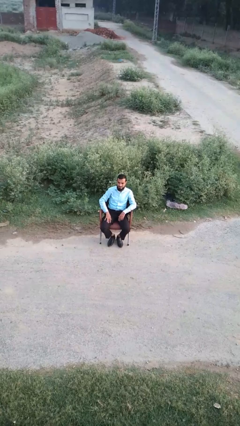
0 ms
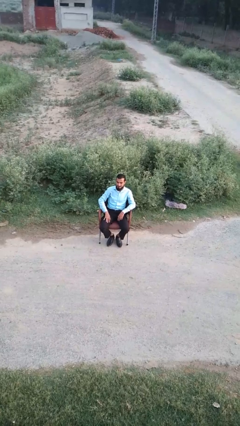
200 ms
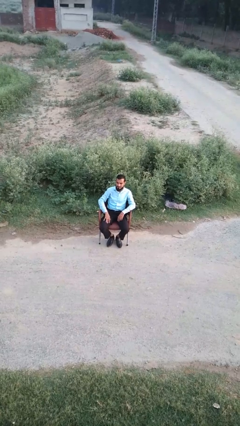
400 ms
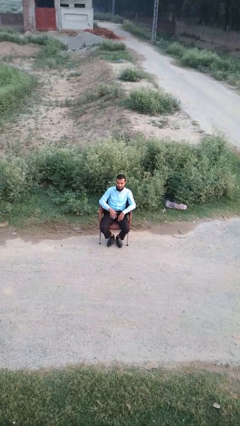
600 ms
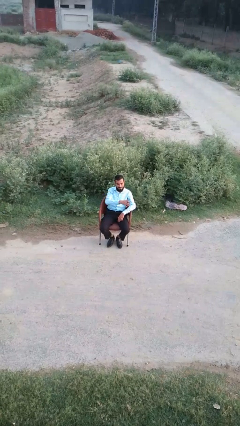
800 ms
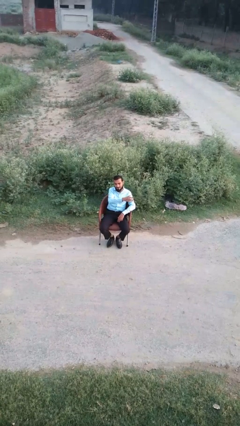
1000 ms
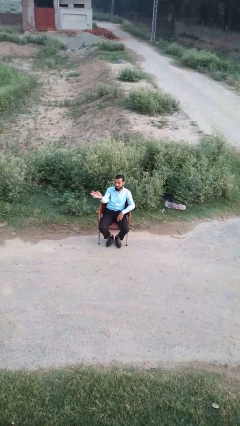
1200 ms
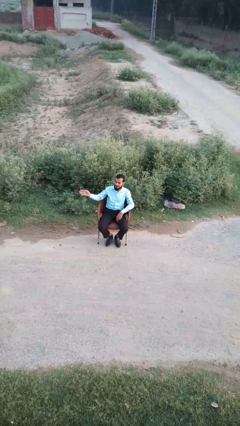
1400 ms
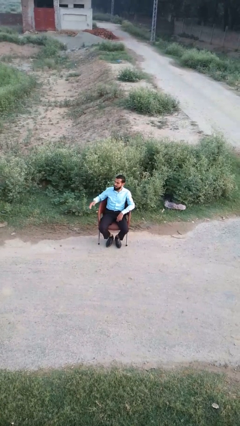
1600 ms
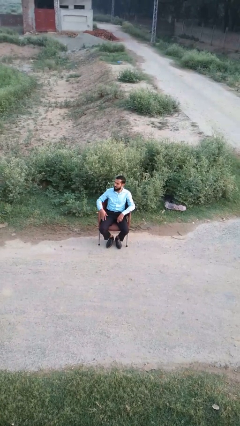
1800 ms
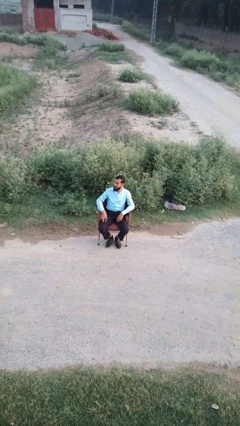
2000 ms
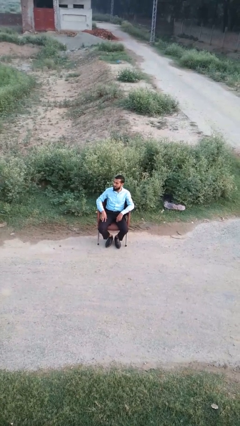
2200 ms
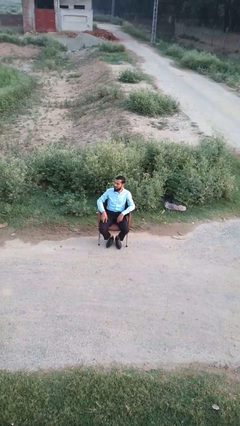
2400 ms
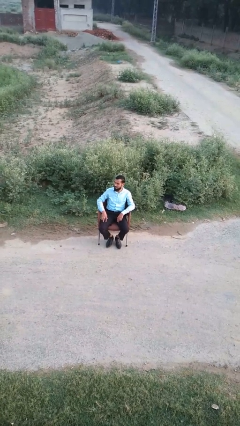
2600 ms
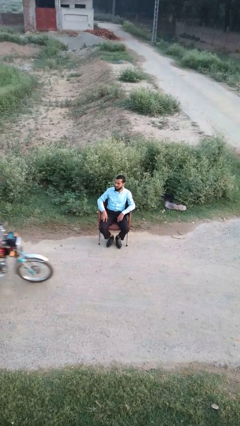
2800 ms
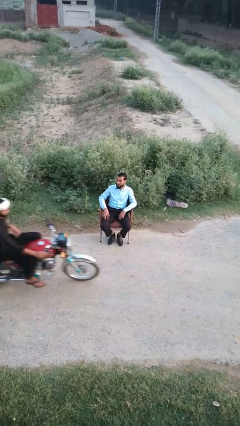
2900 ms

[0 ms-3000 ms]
person gestures swipe right

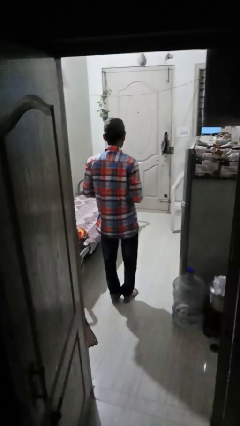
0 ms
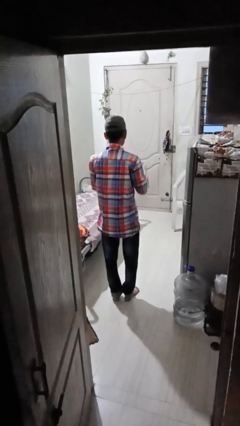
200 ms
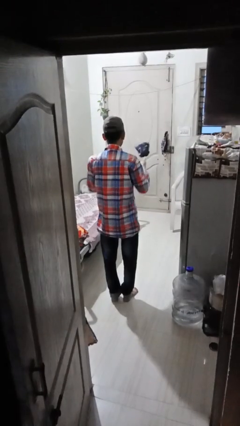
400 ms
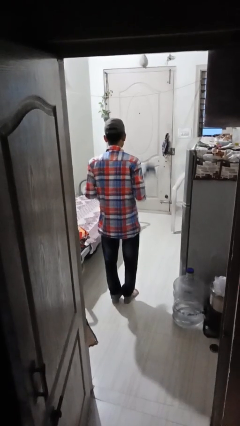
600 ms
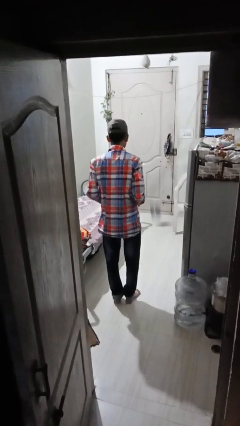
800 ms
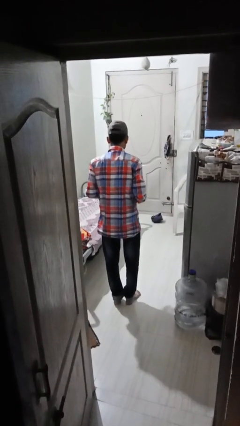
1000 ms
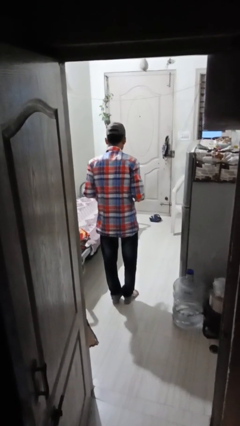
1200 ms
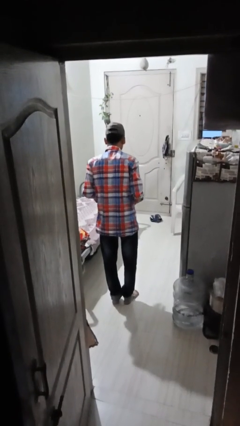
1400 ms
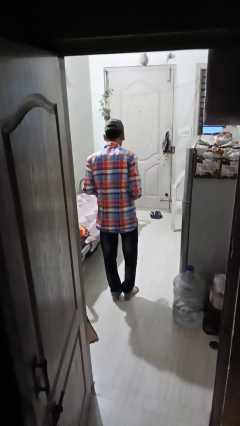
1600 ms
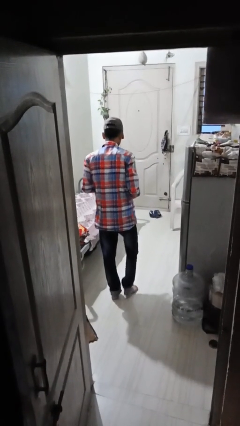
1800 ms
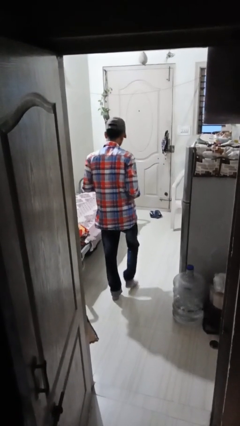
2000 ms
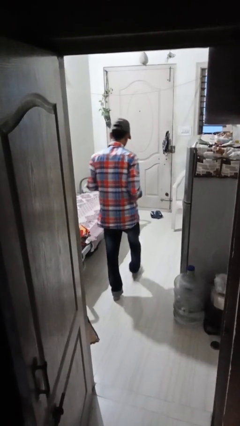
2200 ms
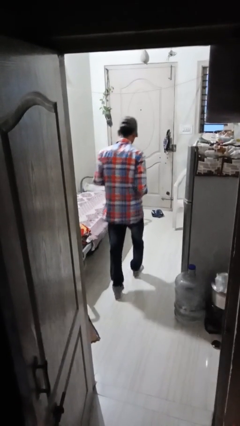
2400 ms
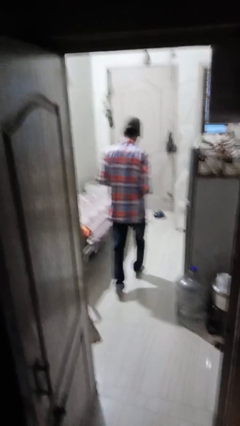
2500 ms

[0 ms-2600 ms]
person throws object to ground

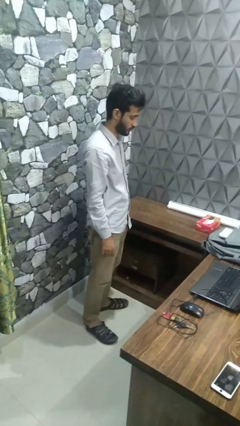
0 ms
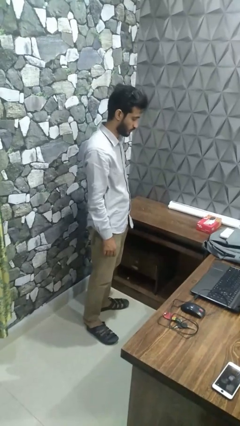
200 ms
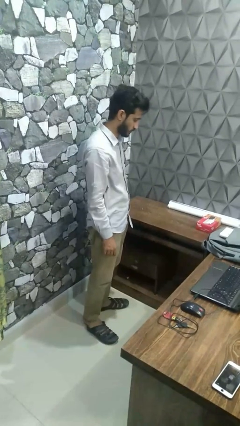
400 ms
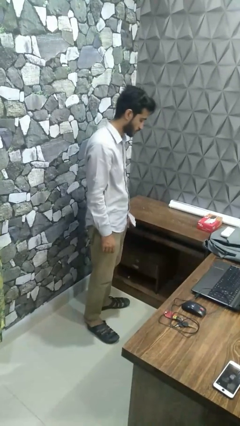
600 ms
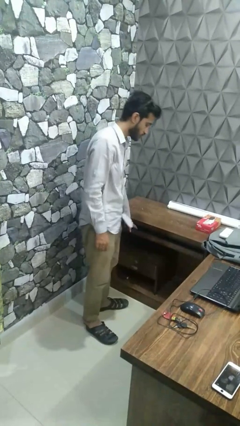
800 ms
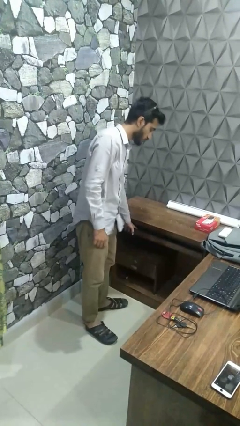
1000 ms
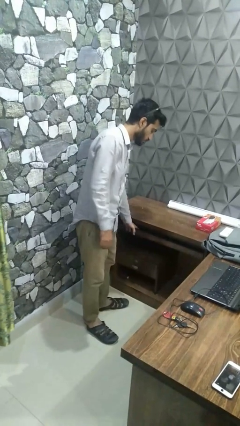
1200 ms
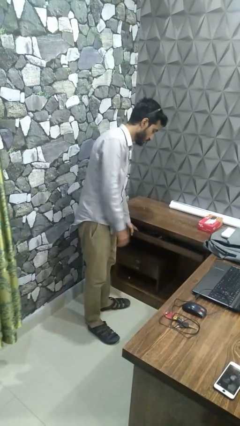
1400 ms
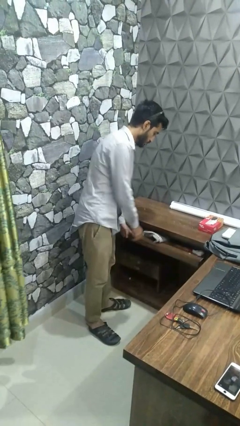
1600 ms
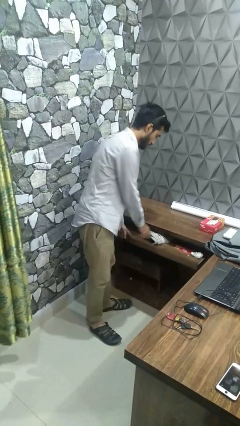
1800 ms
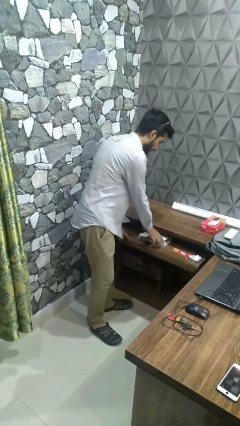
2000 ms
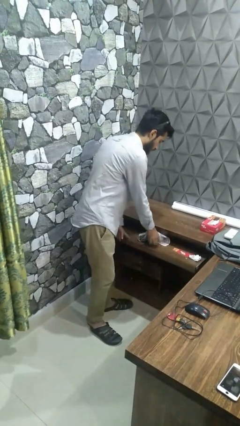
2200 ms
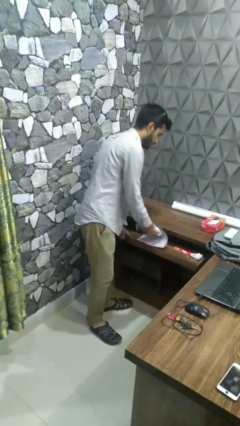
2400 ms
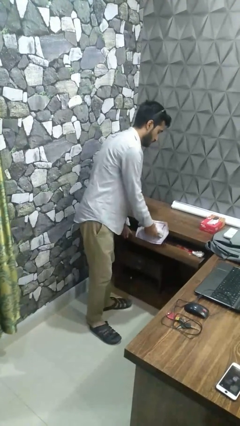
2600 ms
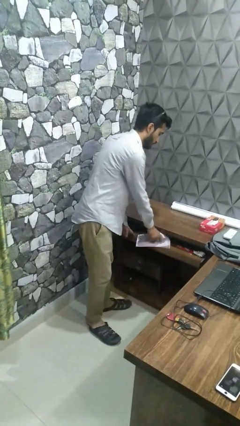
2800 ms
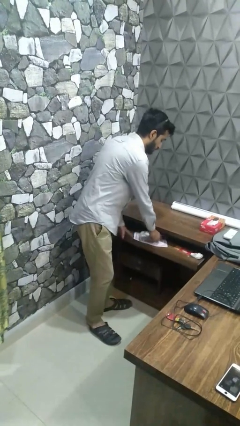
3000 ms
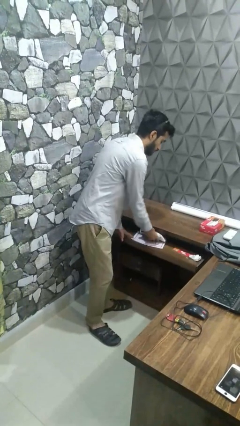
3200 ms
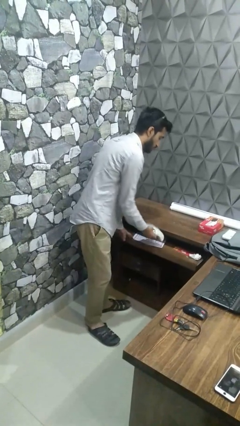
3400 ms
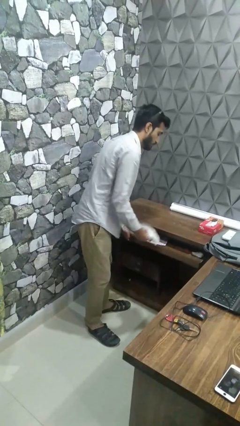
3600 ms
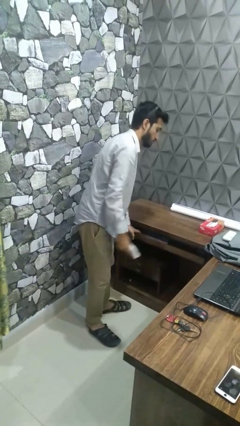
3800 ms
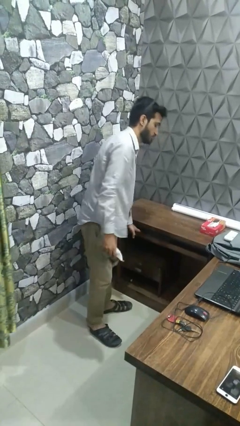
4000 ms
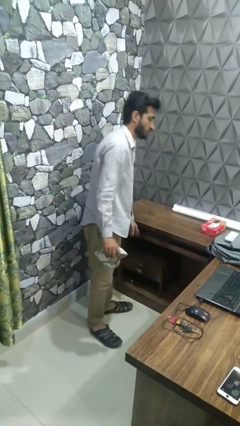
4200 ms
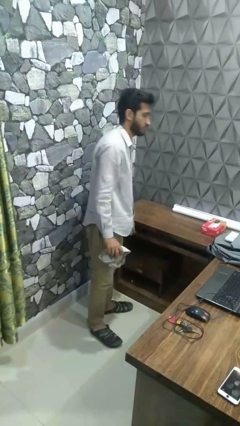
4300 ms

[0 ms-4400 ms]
person takes clothes from dresser

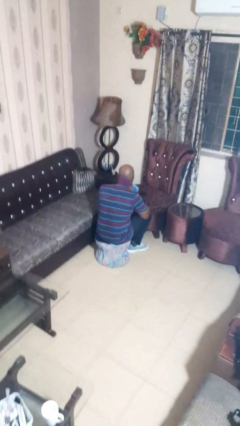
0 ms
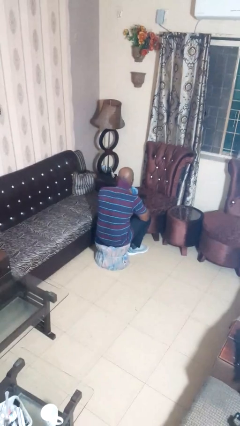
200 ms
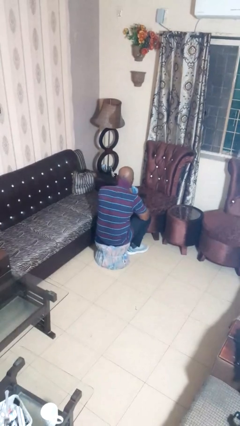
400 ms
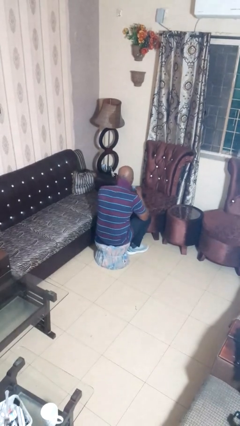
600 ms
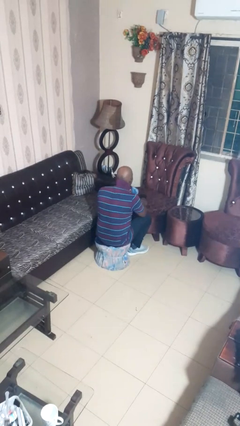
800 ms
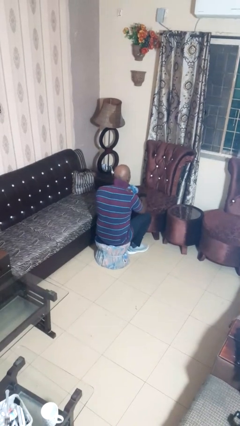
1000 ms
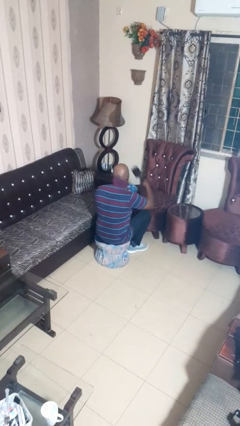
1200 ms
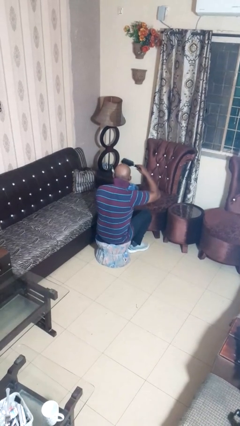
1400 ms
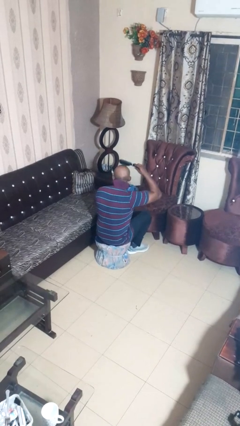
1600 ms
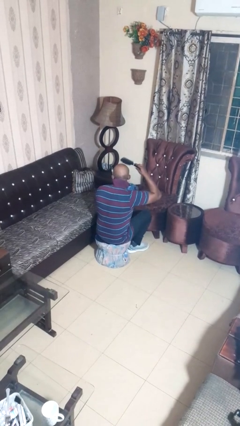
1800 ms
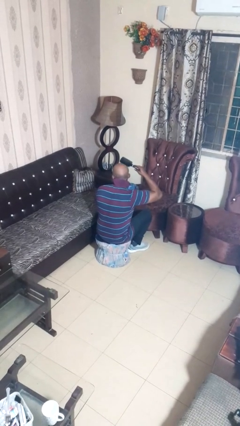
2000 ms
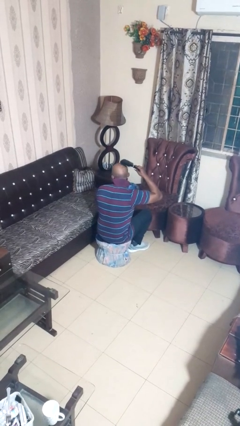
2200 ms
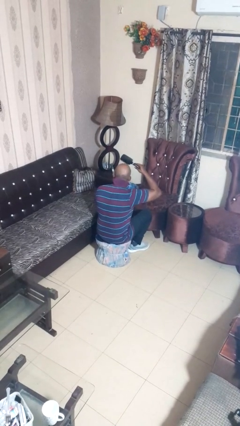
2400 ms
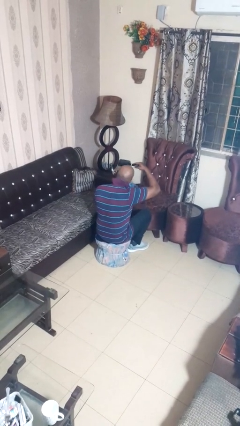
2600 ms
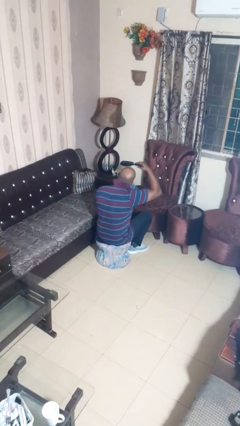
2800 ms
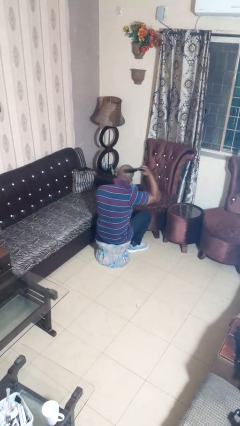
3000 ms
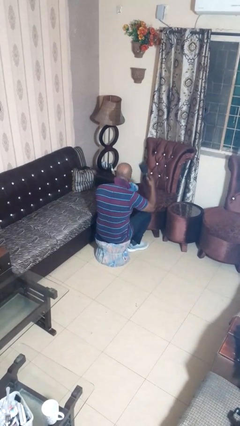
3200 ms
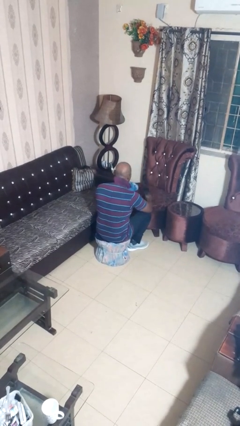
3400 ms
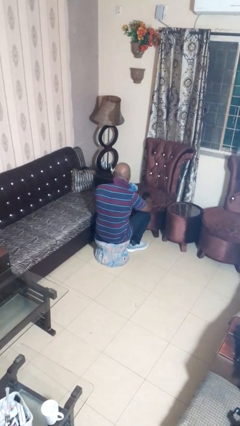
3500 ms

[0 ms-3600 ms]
person brushes hair

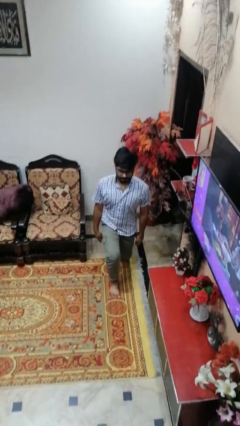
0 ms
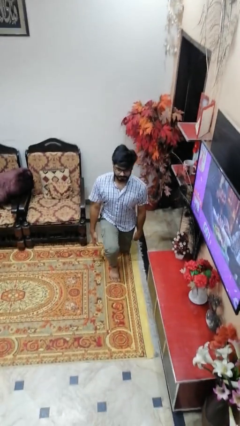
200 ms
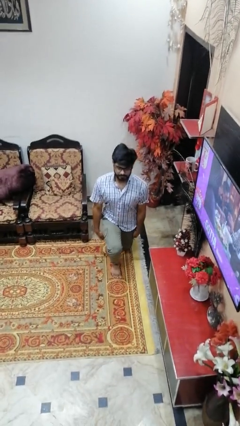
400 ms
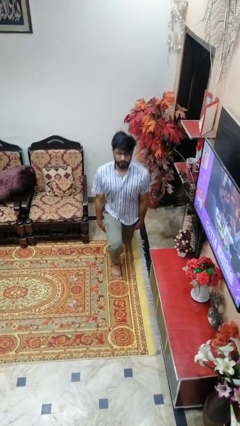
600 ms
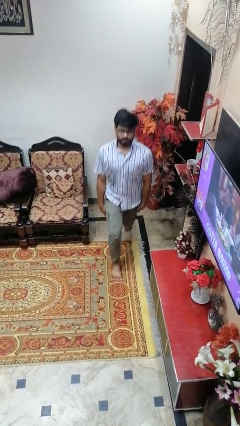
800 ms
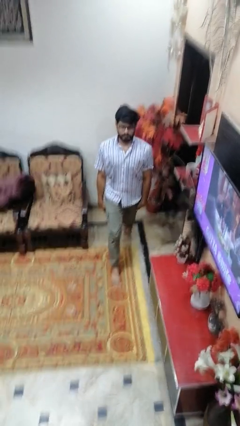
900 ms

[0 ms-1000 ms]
person exercises with lunges

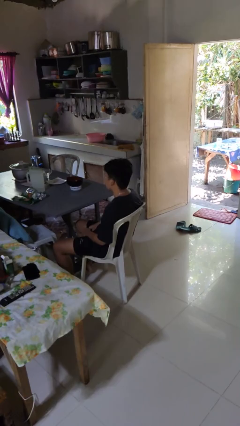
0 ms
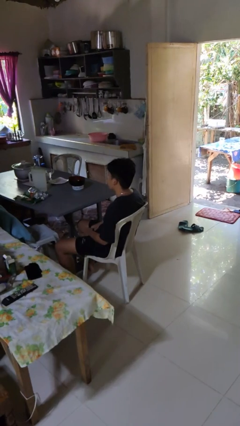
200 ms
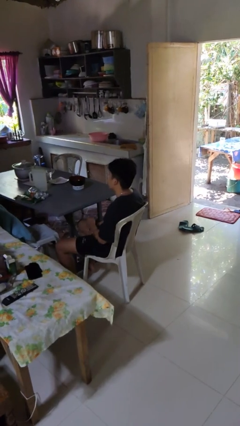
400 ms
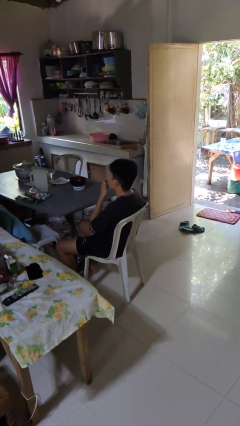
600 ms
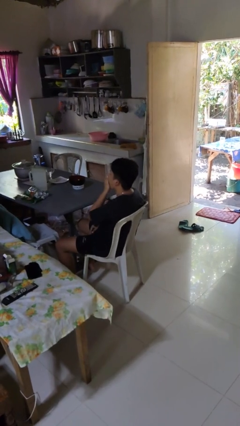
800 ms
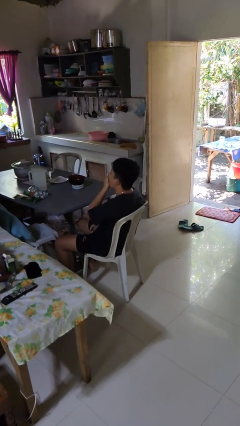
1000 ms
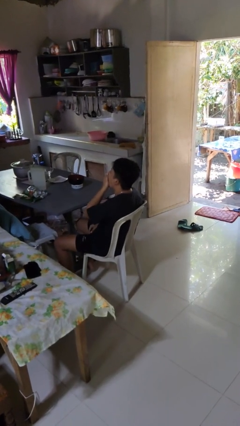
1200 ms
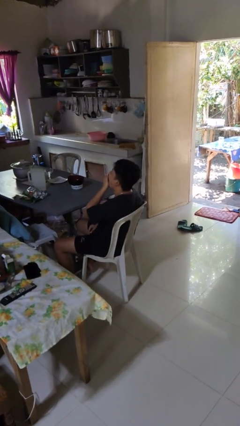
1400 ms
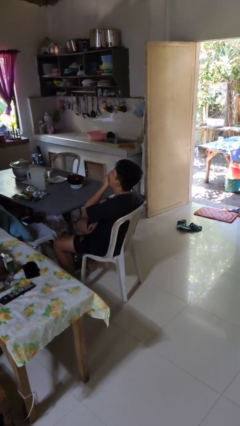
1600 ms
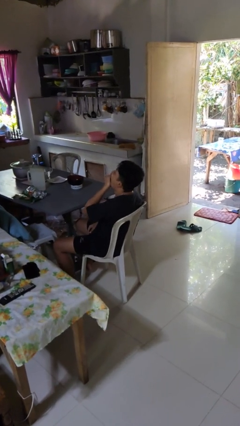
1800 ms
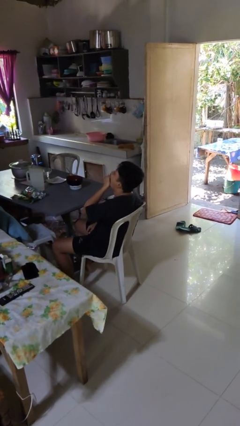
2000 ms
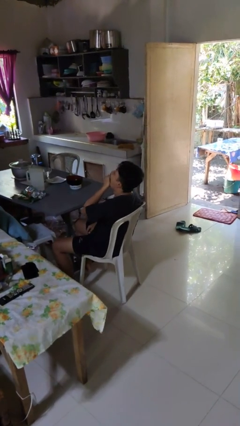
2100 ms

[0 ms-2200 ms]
person yawns

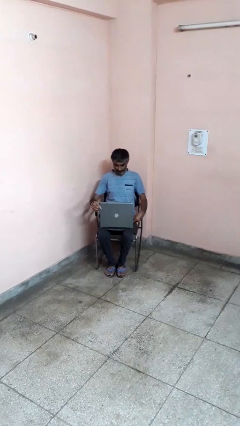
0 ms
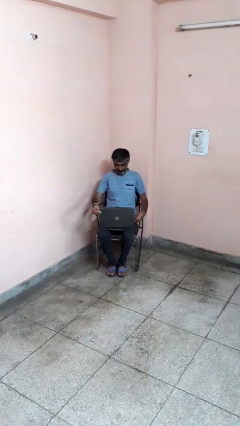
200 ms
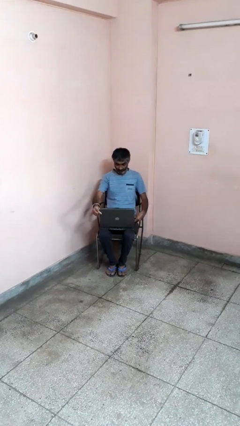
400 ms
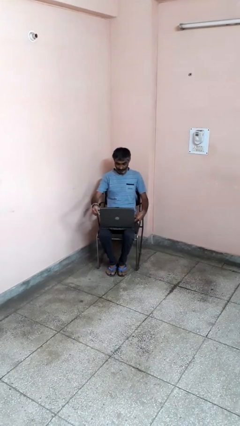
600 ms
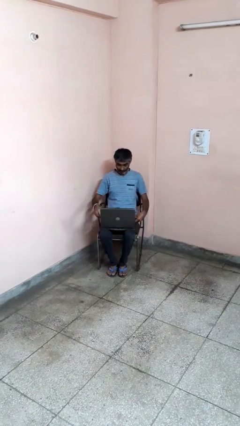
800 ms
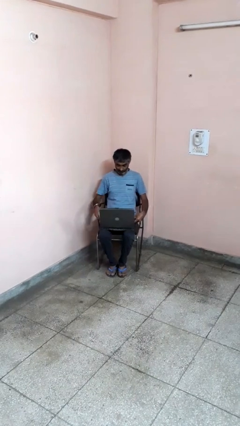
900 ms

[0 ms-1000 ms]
person opens laptop
